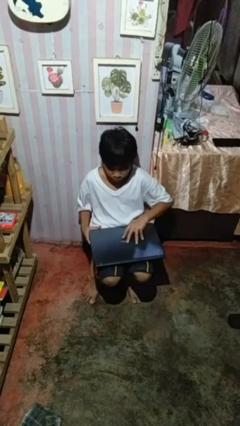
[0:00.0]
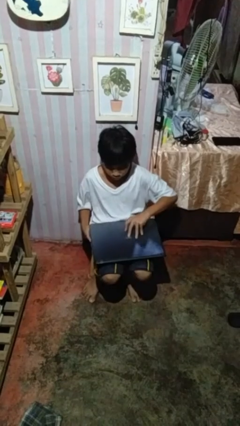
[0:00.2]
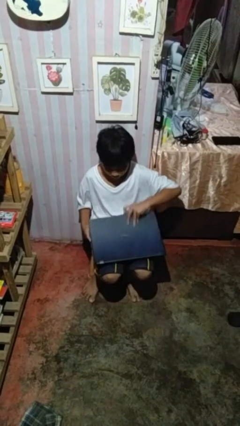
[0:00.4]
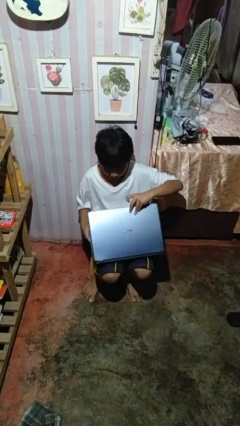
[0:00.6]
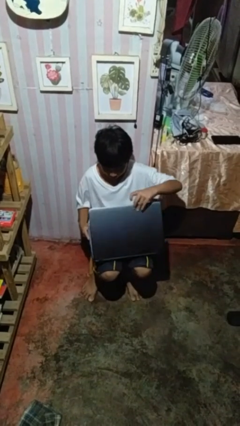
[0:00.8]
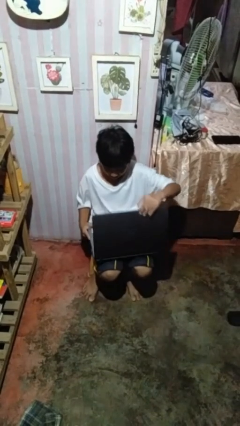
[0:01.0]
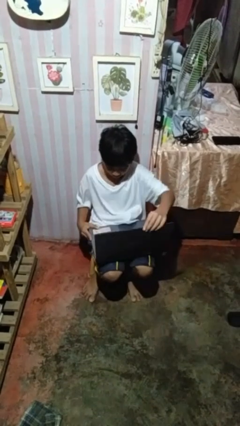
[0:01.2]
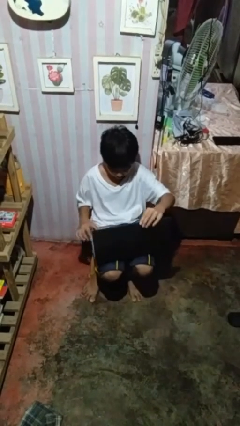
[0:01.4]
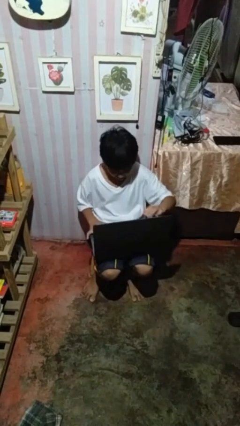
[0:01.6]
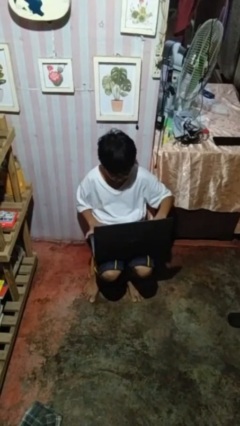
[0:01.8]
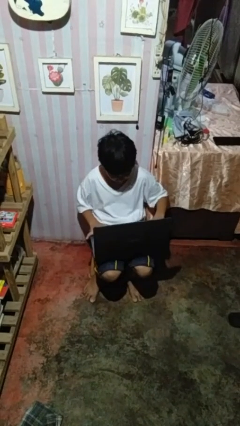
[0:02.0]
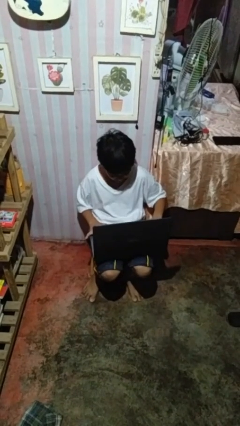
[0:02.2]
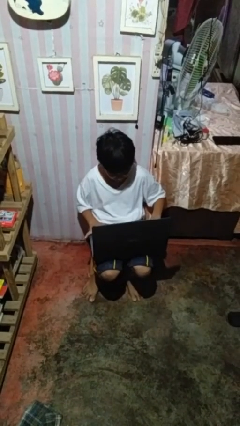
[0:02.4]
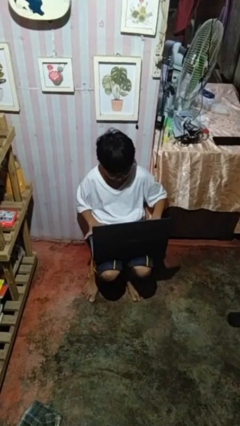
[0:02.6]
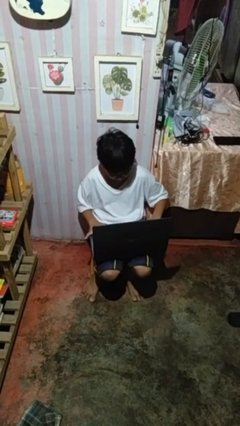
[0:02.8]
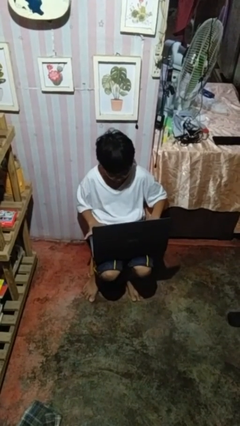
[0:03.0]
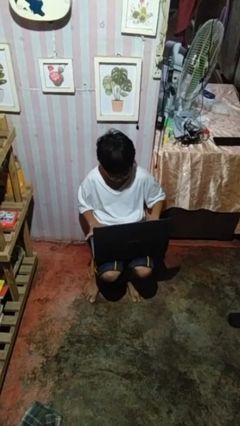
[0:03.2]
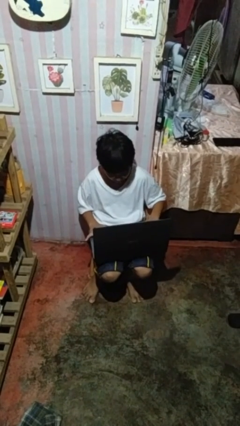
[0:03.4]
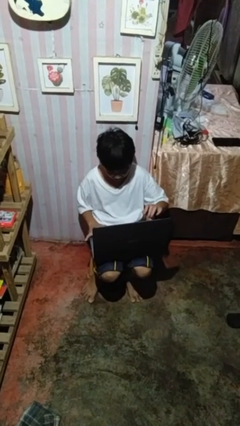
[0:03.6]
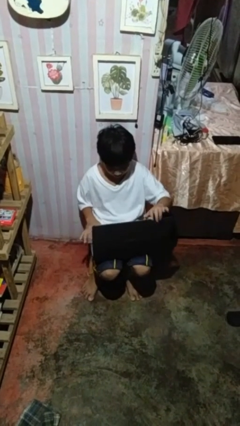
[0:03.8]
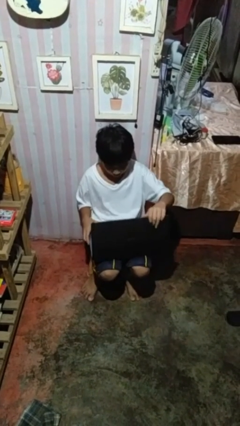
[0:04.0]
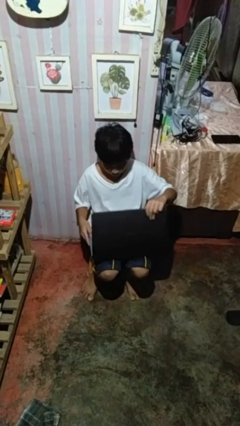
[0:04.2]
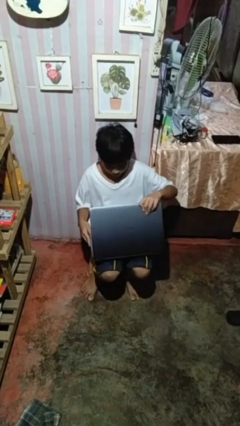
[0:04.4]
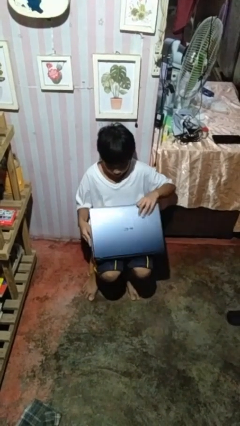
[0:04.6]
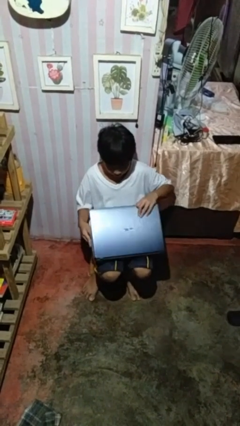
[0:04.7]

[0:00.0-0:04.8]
person interacts with laptop

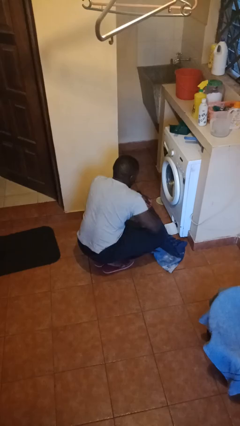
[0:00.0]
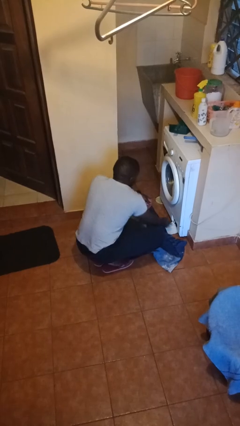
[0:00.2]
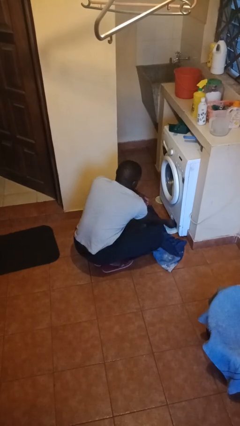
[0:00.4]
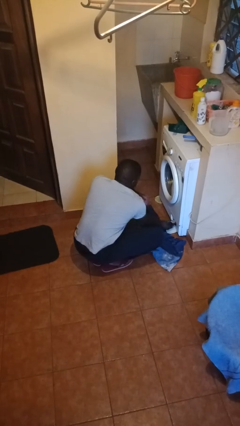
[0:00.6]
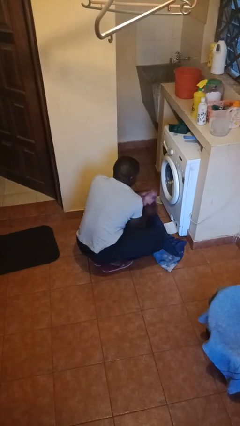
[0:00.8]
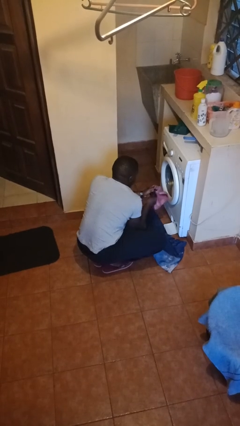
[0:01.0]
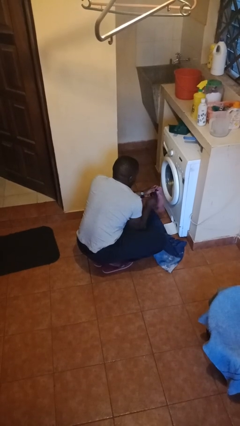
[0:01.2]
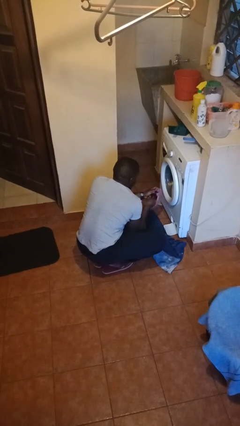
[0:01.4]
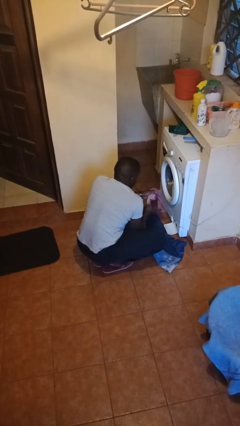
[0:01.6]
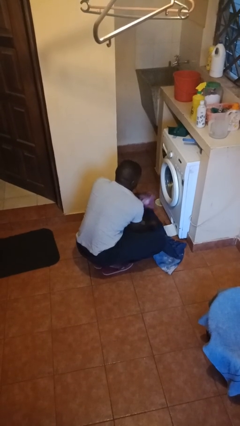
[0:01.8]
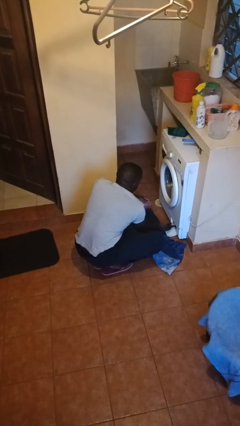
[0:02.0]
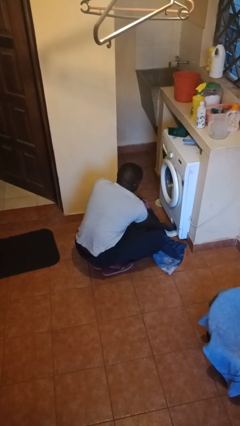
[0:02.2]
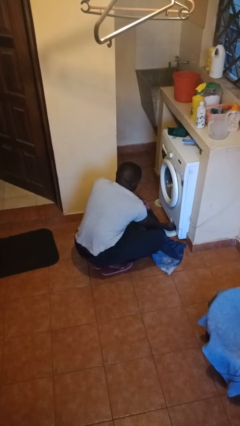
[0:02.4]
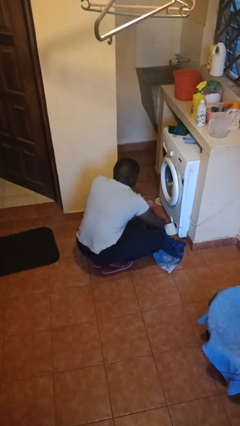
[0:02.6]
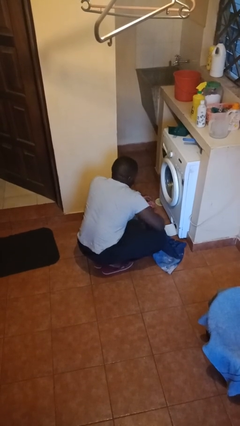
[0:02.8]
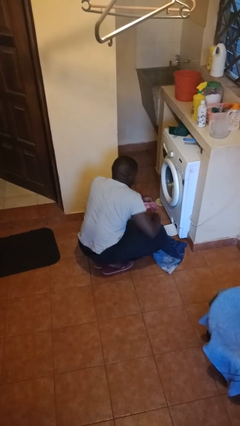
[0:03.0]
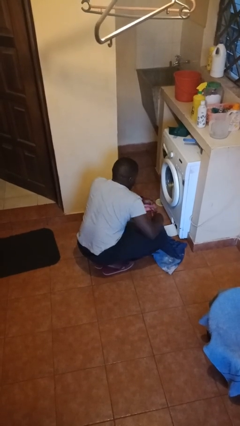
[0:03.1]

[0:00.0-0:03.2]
person cleans dryer lint trap

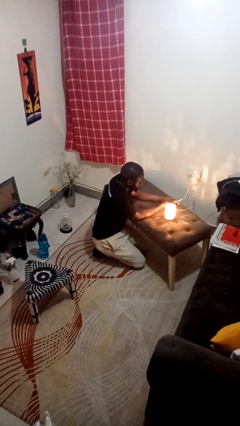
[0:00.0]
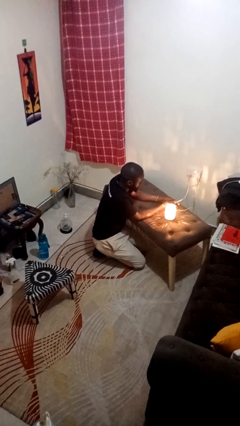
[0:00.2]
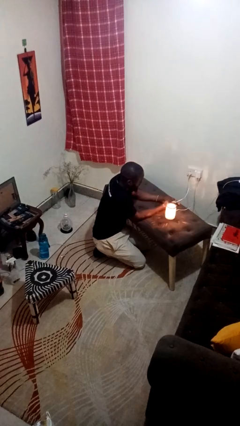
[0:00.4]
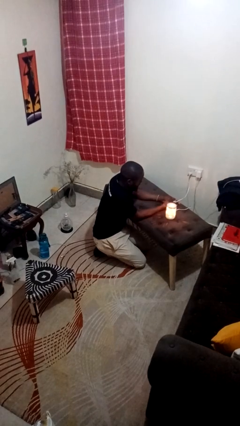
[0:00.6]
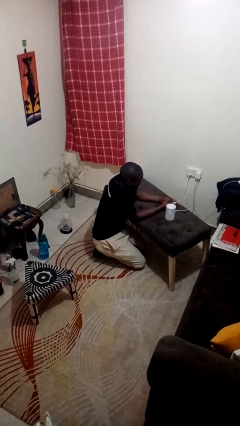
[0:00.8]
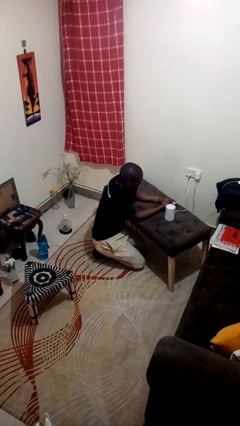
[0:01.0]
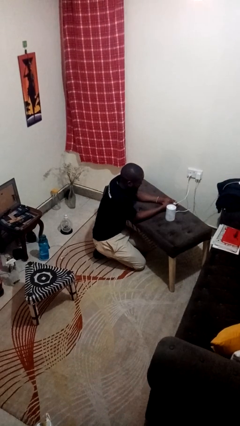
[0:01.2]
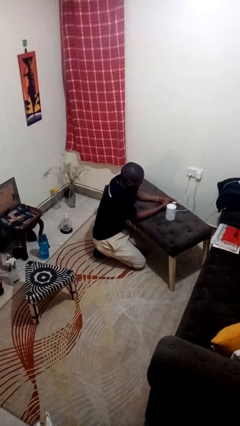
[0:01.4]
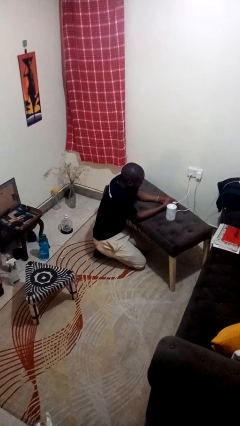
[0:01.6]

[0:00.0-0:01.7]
person turns off lamp

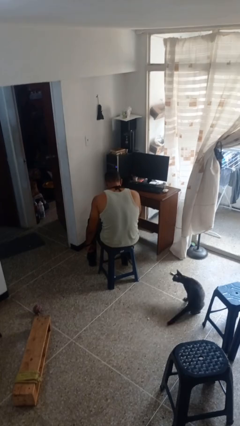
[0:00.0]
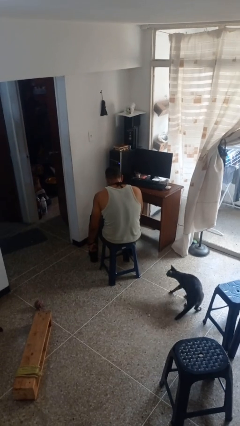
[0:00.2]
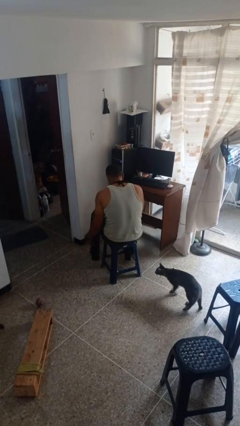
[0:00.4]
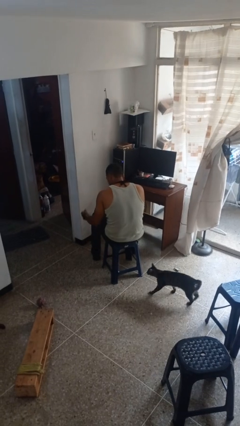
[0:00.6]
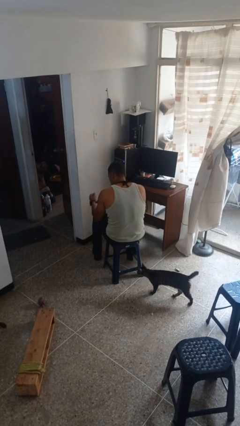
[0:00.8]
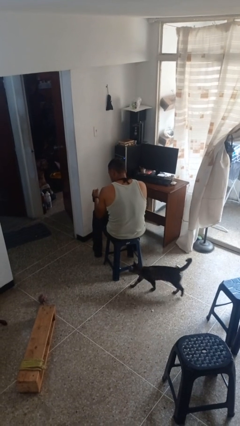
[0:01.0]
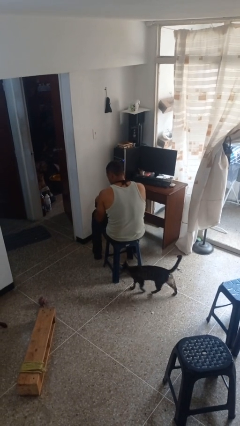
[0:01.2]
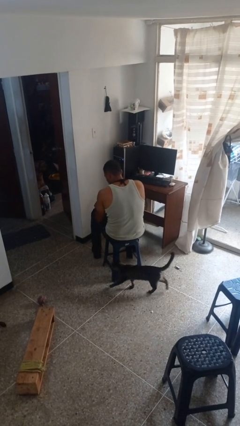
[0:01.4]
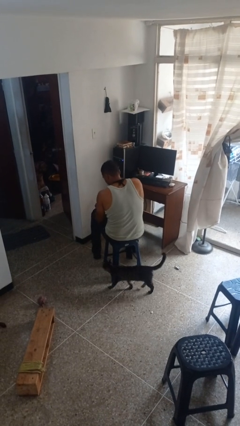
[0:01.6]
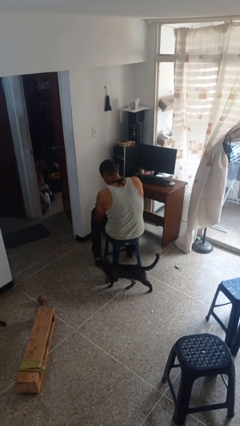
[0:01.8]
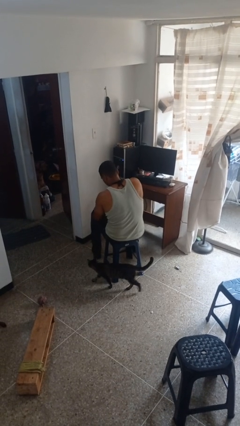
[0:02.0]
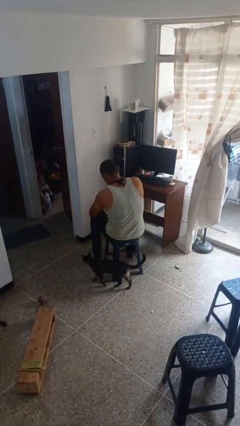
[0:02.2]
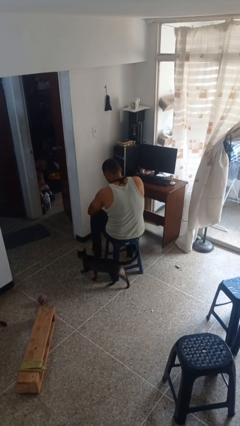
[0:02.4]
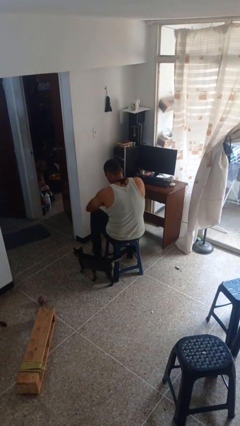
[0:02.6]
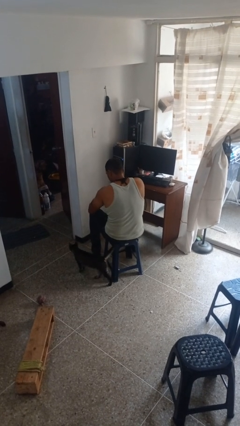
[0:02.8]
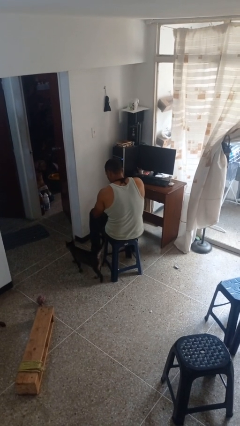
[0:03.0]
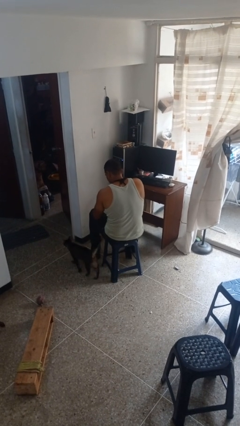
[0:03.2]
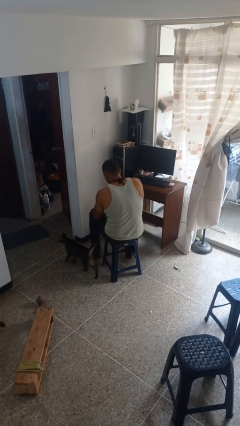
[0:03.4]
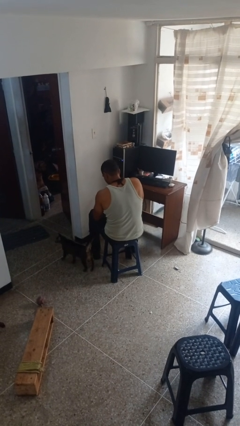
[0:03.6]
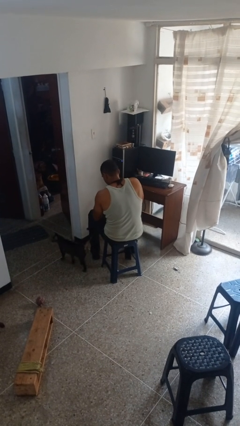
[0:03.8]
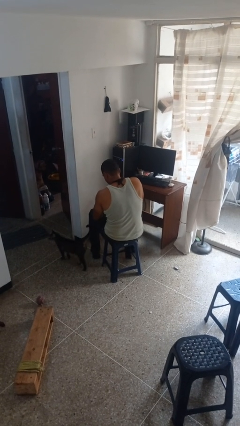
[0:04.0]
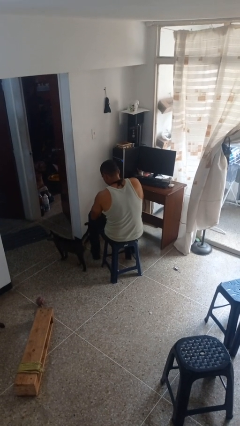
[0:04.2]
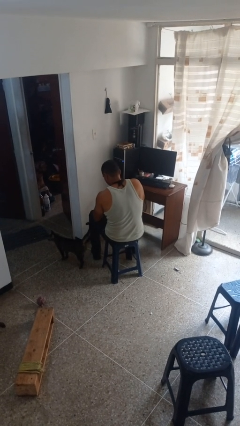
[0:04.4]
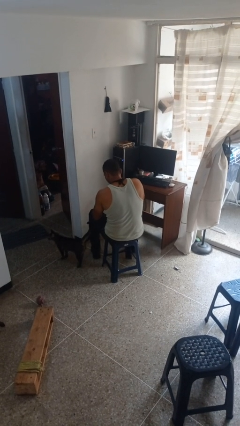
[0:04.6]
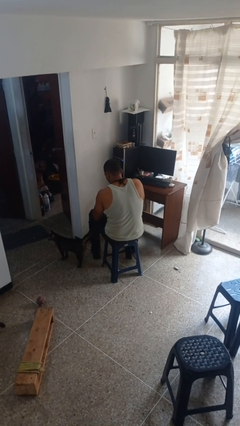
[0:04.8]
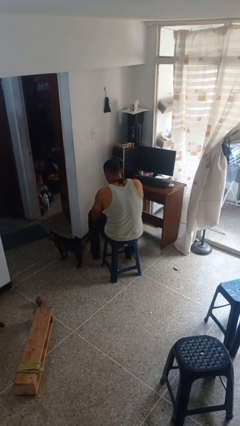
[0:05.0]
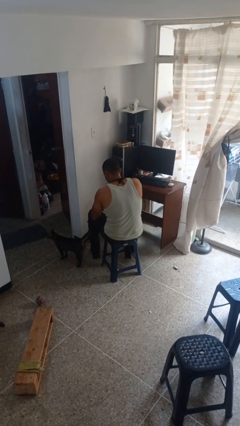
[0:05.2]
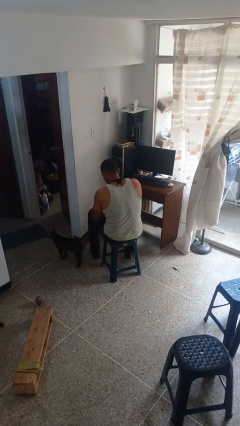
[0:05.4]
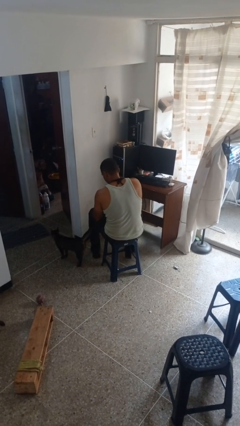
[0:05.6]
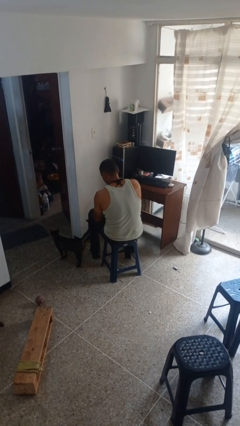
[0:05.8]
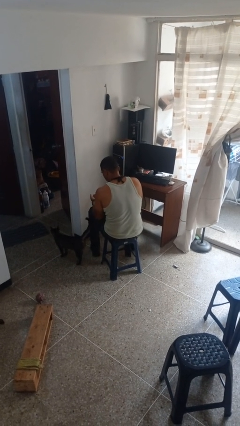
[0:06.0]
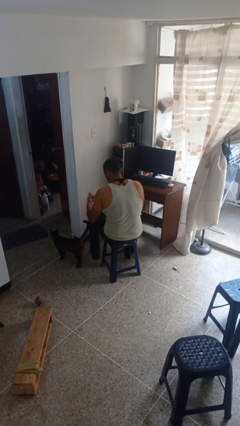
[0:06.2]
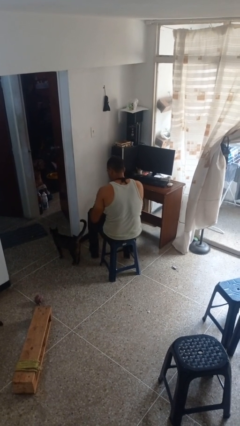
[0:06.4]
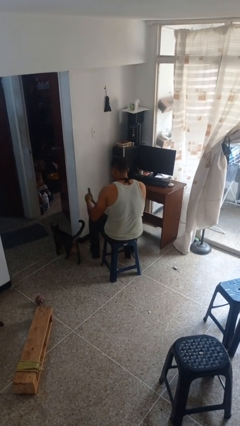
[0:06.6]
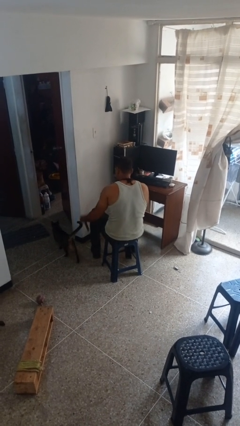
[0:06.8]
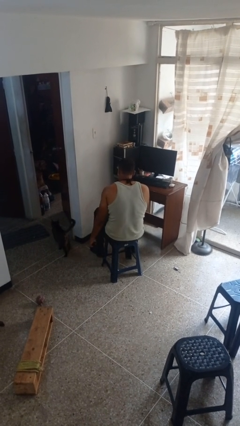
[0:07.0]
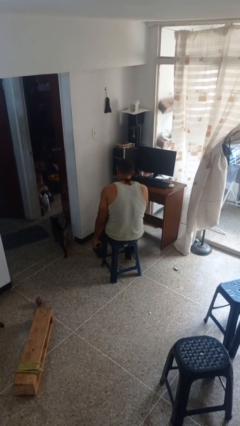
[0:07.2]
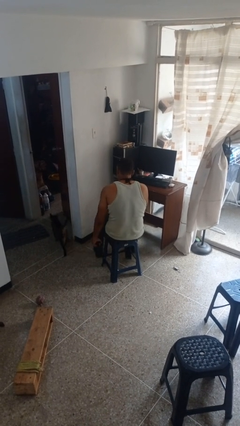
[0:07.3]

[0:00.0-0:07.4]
person takes off wristwatch

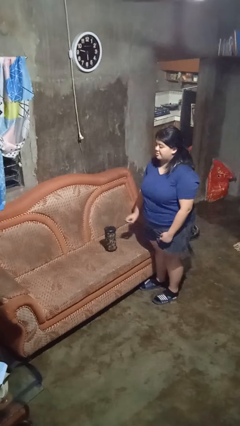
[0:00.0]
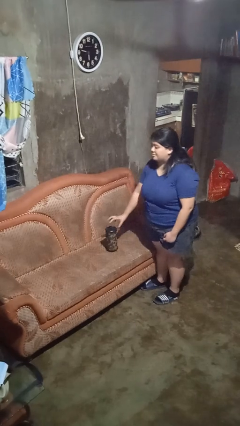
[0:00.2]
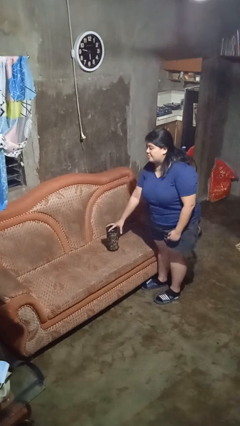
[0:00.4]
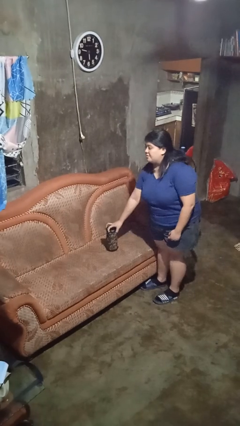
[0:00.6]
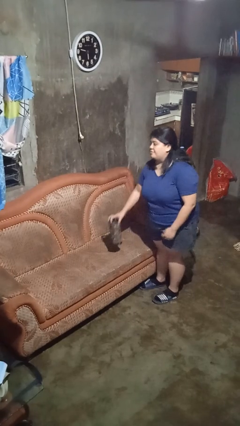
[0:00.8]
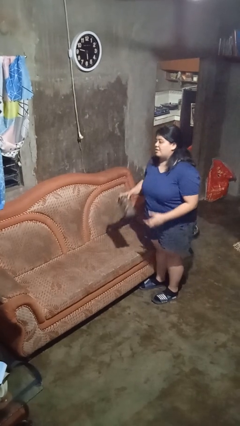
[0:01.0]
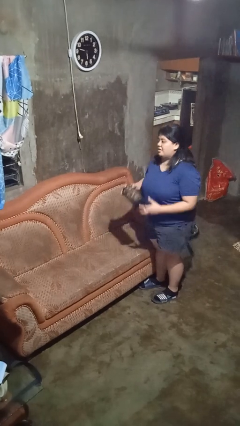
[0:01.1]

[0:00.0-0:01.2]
person picks up object from couch
